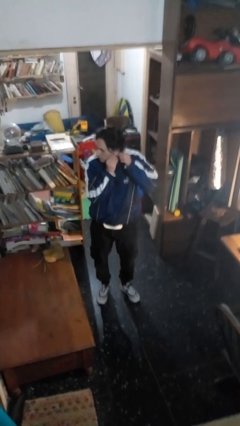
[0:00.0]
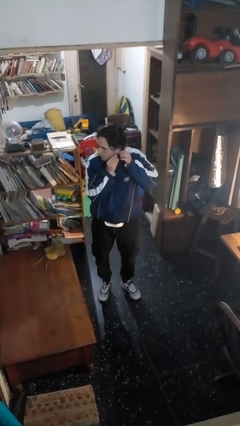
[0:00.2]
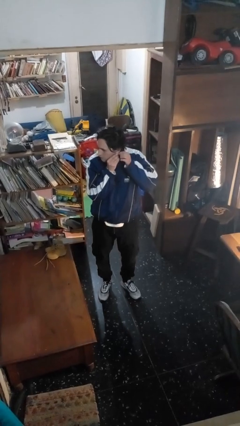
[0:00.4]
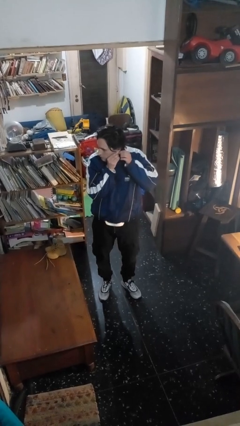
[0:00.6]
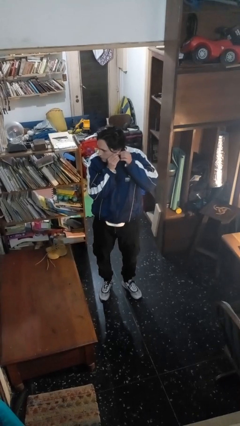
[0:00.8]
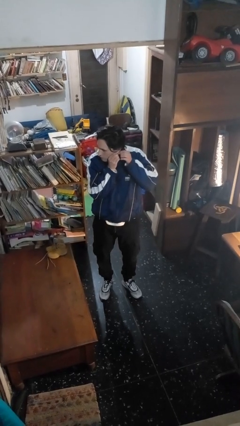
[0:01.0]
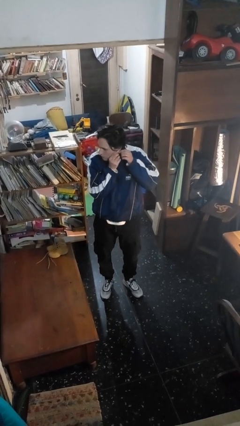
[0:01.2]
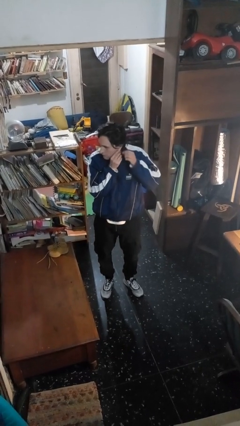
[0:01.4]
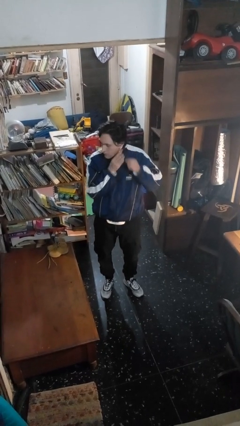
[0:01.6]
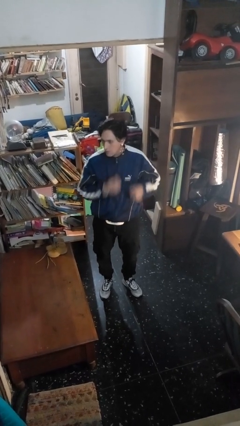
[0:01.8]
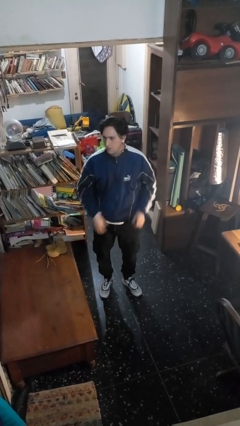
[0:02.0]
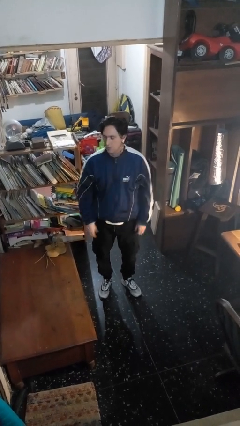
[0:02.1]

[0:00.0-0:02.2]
person puts on earrings

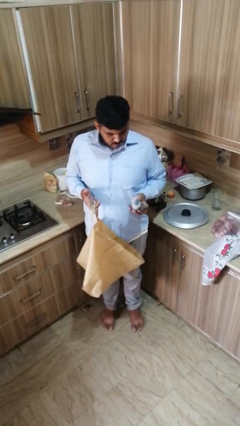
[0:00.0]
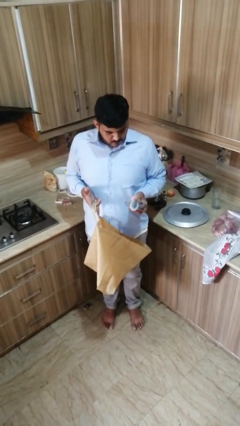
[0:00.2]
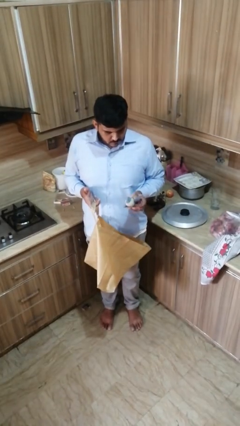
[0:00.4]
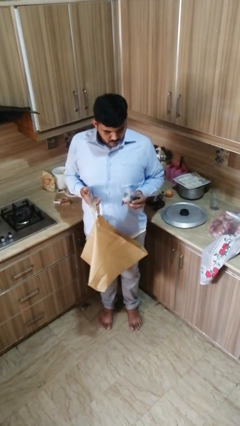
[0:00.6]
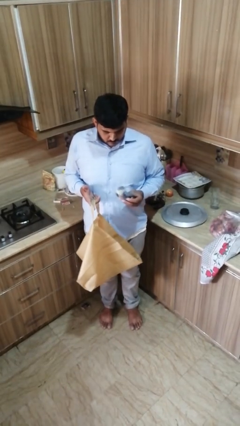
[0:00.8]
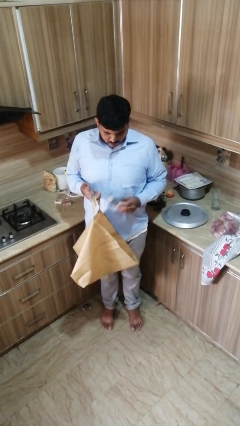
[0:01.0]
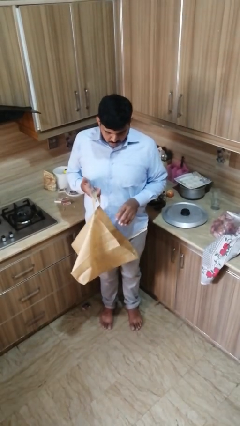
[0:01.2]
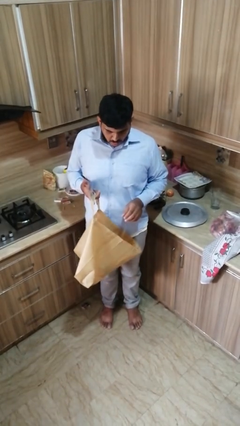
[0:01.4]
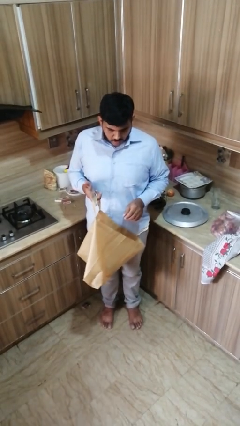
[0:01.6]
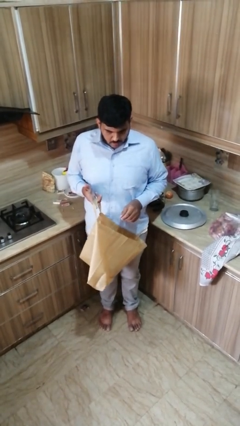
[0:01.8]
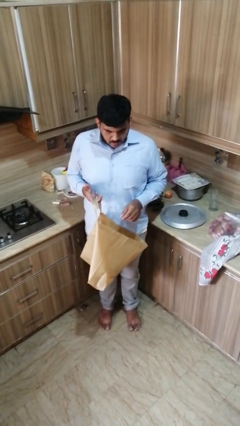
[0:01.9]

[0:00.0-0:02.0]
person puts object into bag

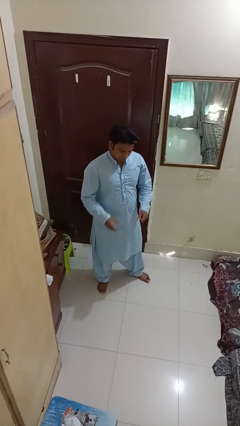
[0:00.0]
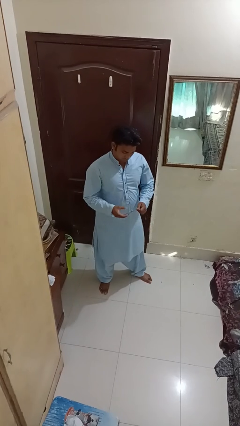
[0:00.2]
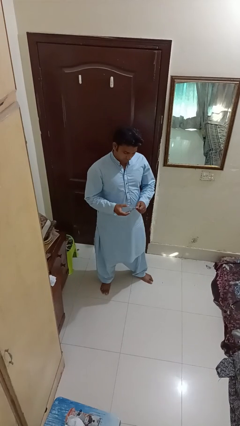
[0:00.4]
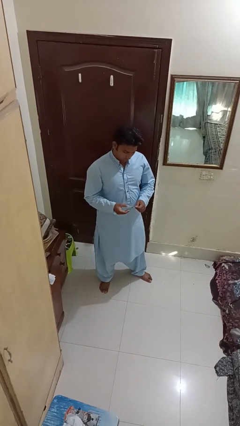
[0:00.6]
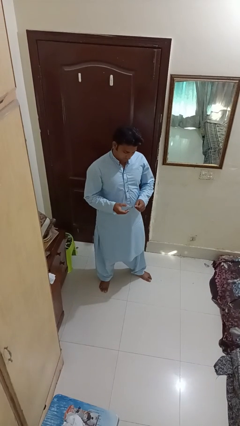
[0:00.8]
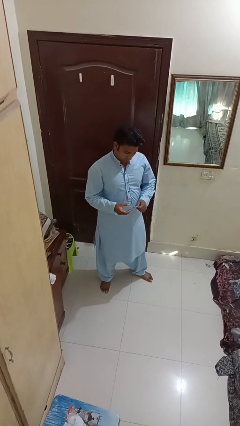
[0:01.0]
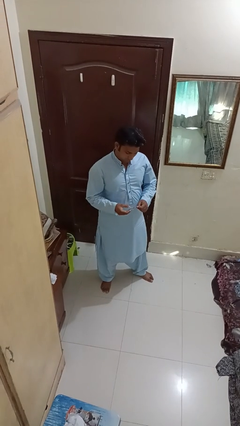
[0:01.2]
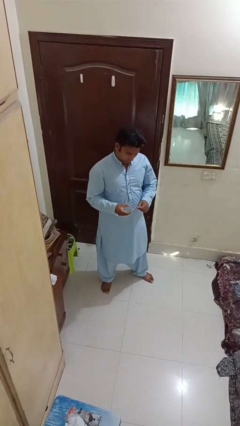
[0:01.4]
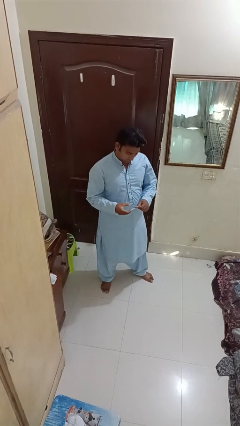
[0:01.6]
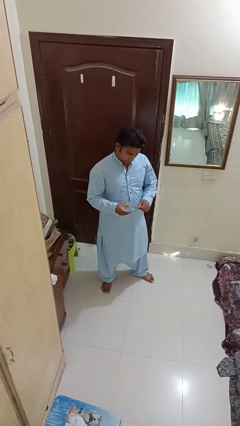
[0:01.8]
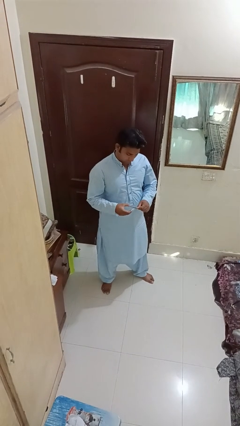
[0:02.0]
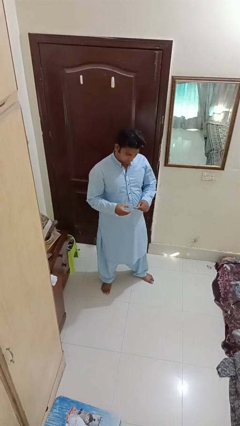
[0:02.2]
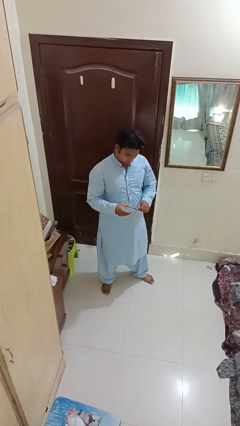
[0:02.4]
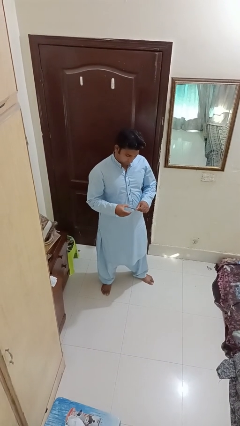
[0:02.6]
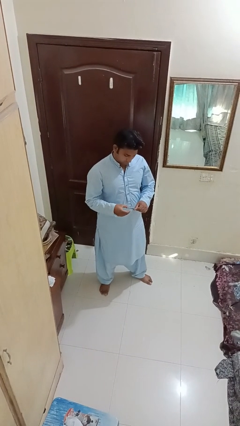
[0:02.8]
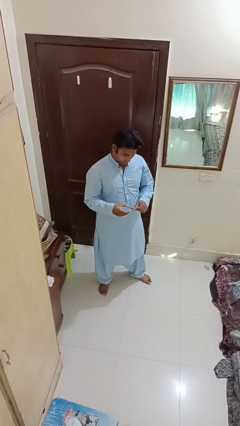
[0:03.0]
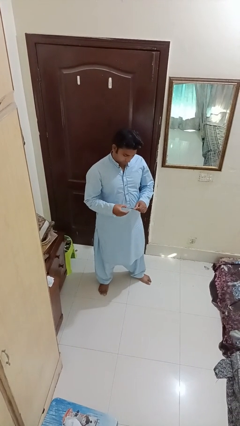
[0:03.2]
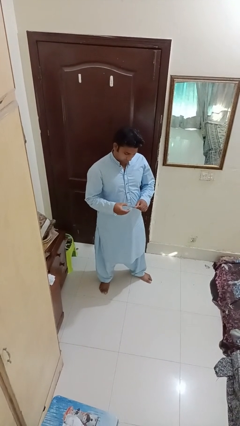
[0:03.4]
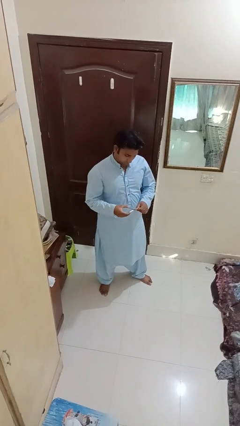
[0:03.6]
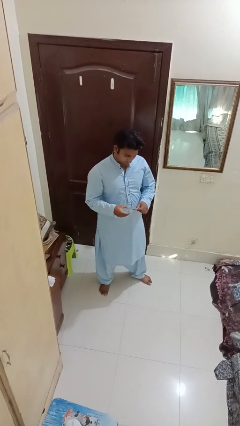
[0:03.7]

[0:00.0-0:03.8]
person clips fingernails

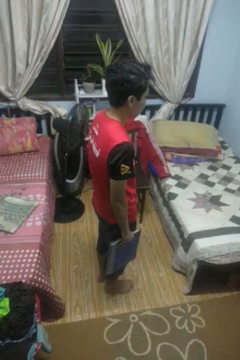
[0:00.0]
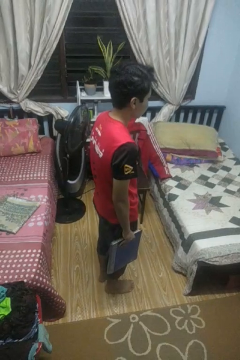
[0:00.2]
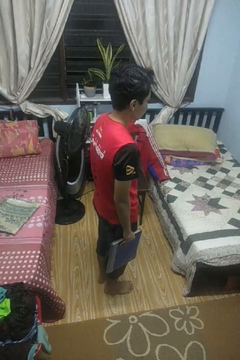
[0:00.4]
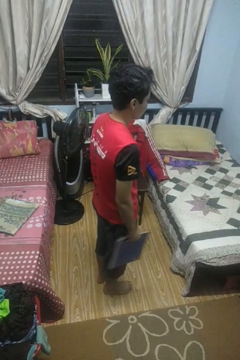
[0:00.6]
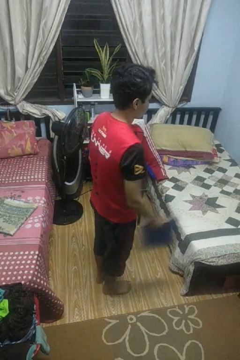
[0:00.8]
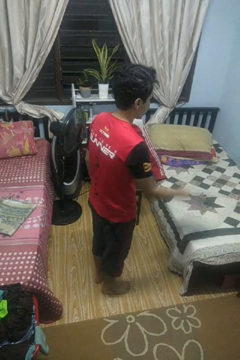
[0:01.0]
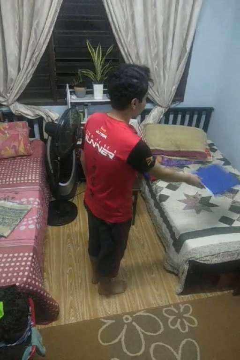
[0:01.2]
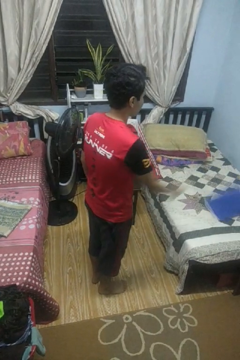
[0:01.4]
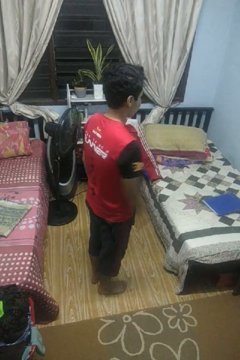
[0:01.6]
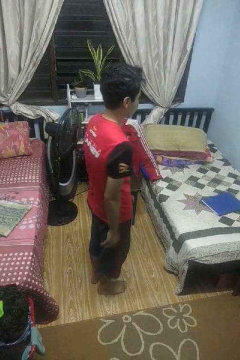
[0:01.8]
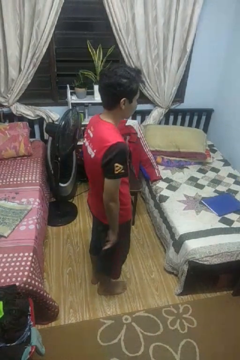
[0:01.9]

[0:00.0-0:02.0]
person throws object on bed

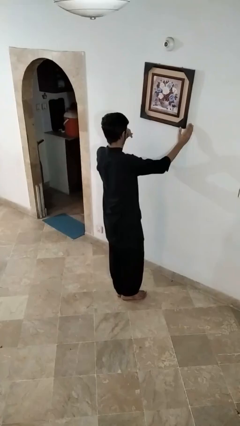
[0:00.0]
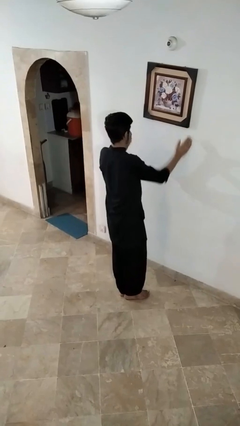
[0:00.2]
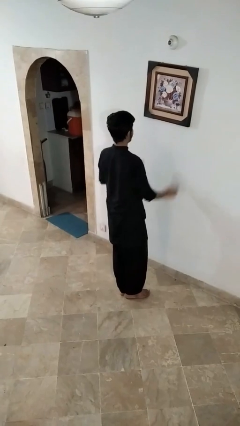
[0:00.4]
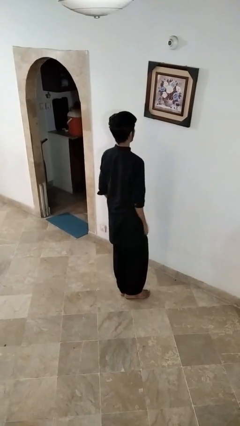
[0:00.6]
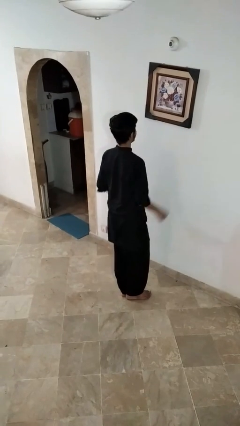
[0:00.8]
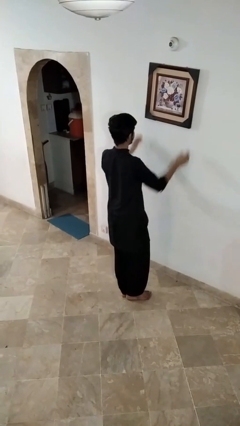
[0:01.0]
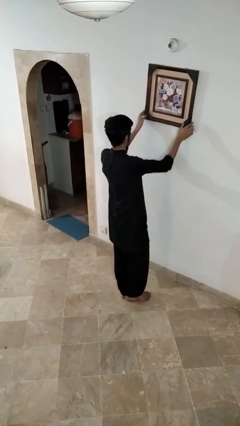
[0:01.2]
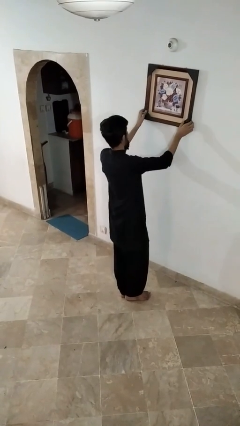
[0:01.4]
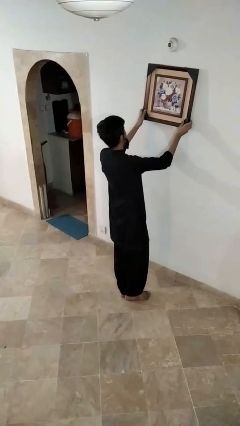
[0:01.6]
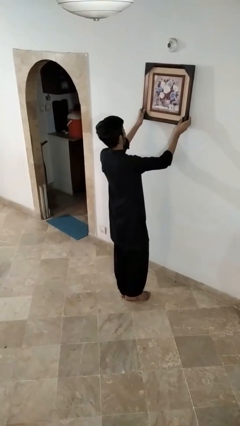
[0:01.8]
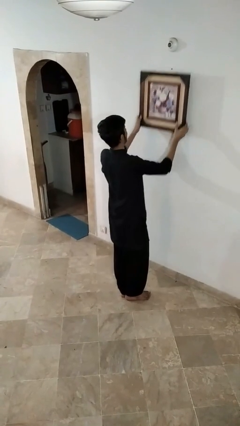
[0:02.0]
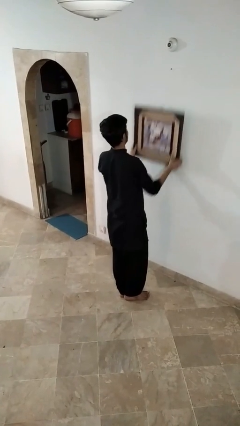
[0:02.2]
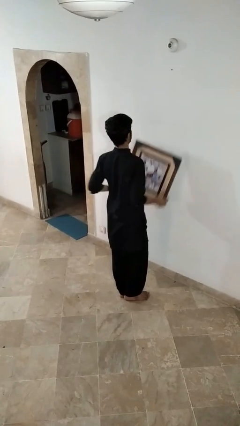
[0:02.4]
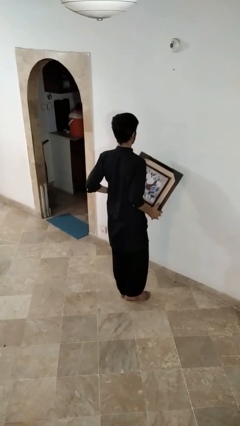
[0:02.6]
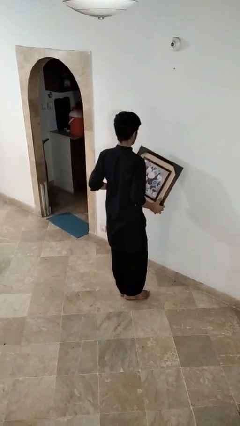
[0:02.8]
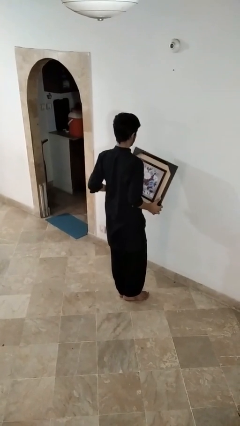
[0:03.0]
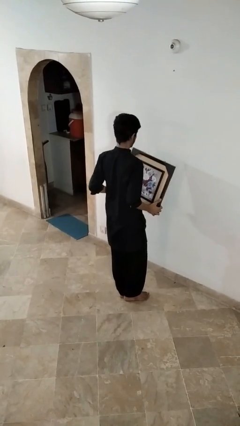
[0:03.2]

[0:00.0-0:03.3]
person takes down picture frame

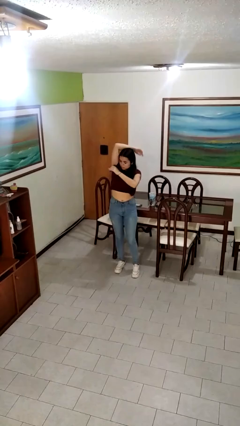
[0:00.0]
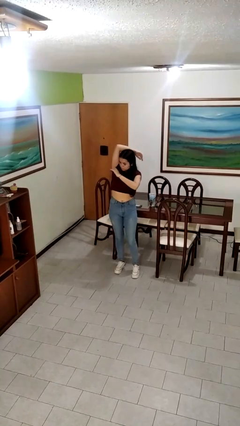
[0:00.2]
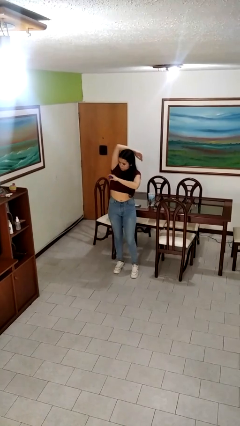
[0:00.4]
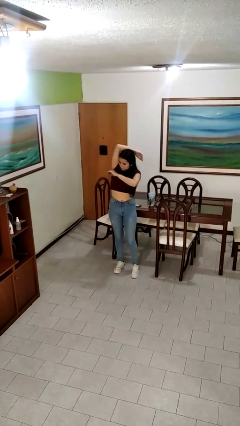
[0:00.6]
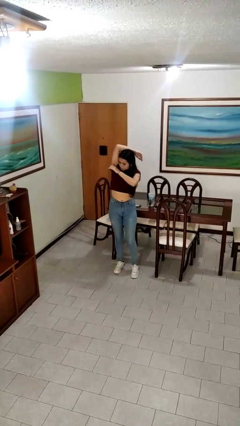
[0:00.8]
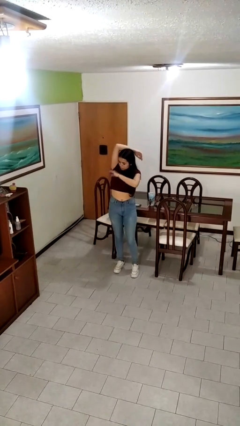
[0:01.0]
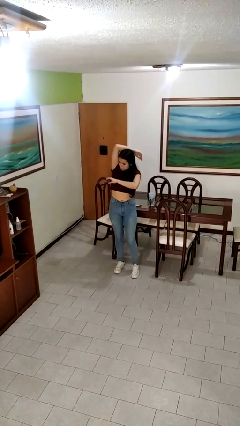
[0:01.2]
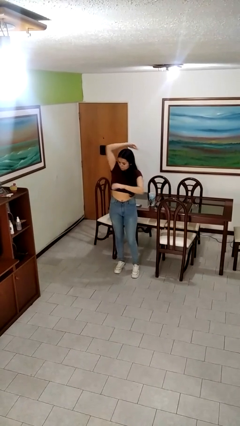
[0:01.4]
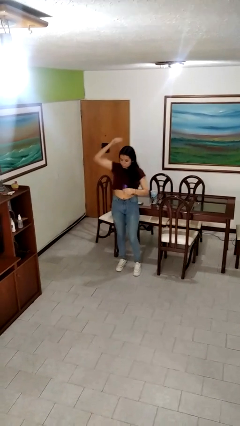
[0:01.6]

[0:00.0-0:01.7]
person applies deodorant

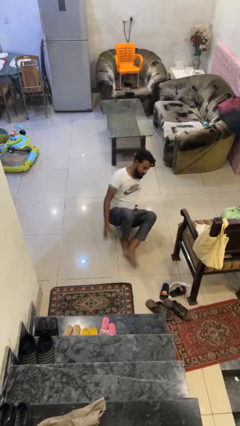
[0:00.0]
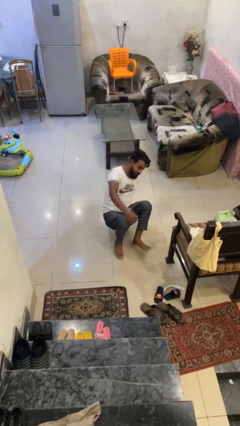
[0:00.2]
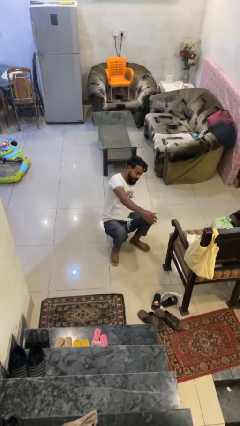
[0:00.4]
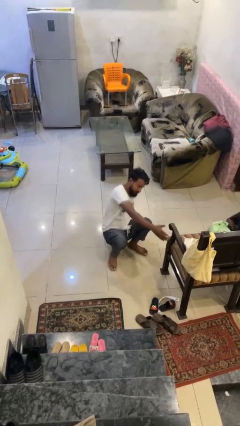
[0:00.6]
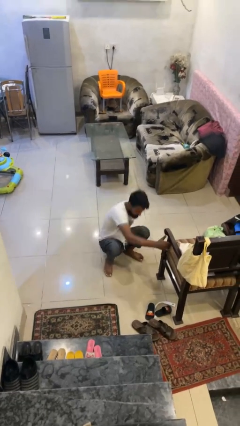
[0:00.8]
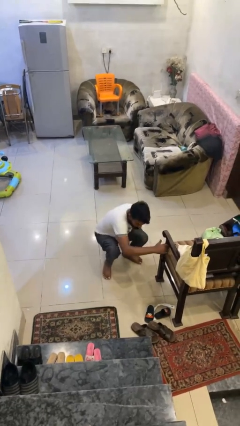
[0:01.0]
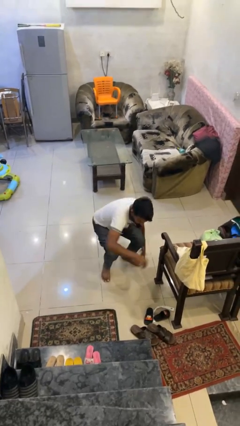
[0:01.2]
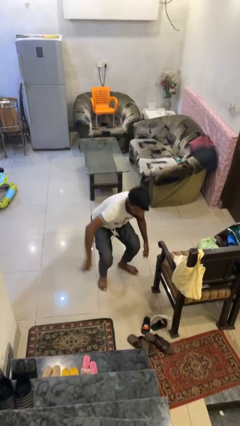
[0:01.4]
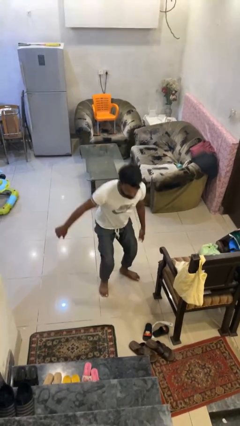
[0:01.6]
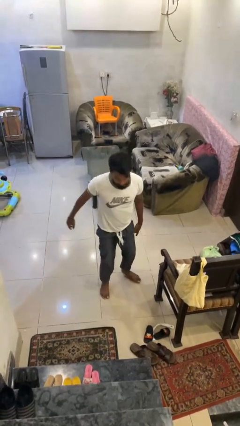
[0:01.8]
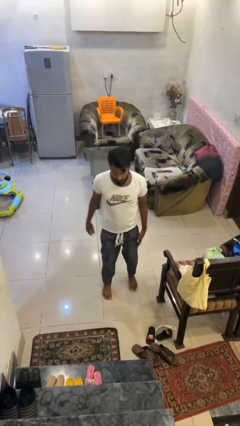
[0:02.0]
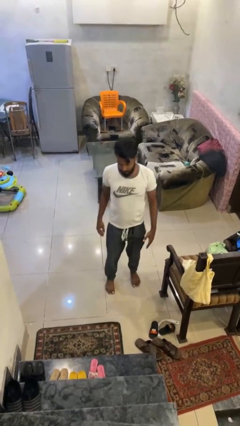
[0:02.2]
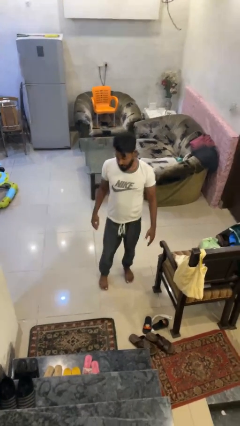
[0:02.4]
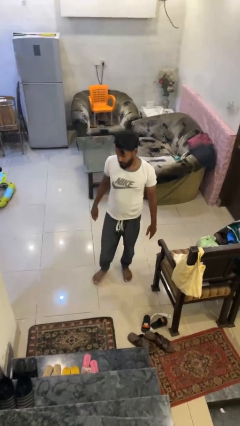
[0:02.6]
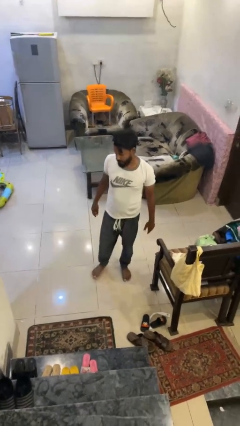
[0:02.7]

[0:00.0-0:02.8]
person stands up from floor
